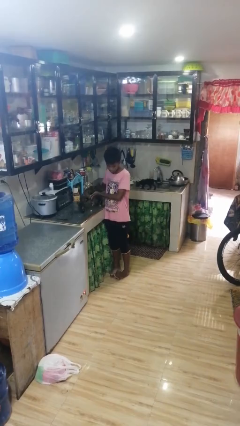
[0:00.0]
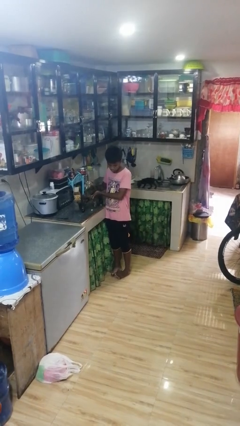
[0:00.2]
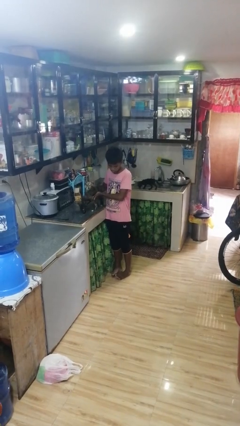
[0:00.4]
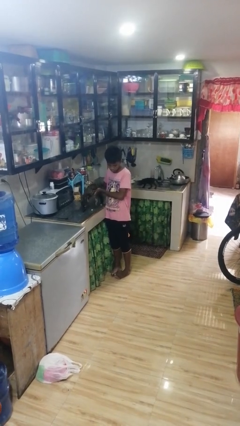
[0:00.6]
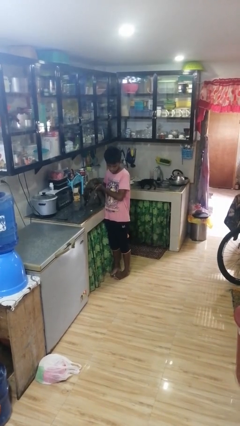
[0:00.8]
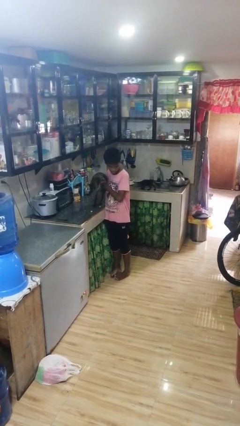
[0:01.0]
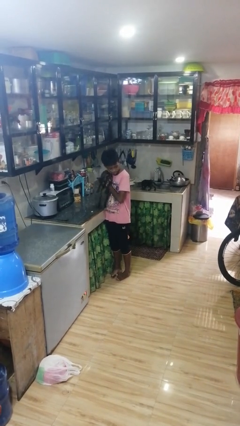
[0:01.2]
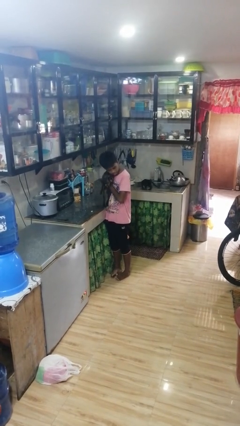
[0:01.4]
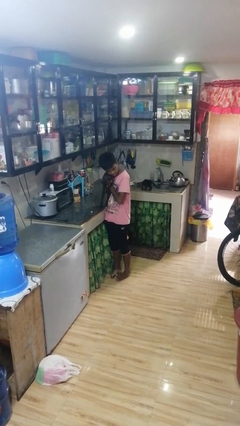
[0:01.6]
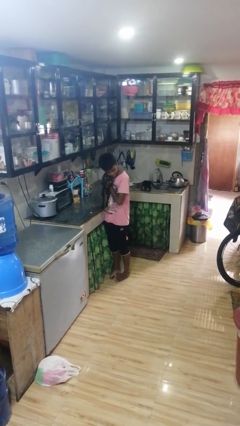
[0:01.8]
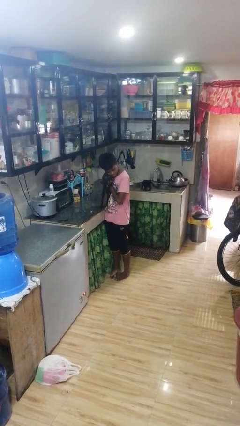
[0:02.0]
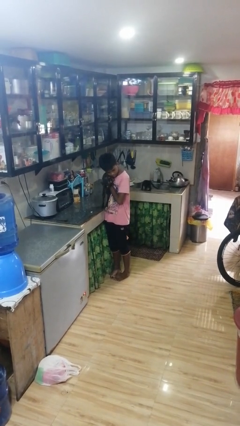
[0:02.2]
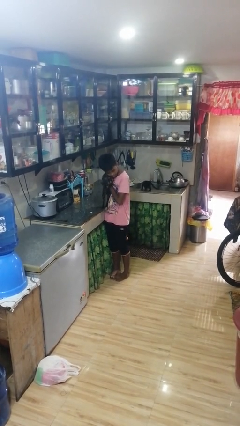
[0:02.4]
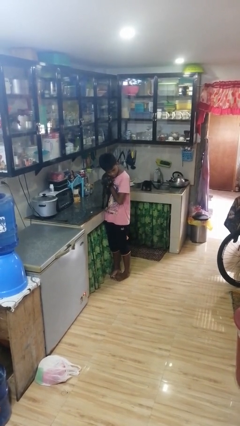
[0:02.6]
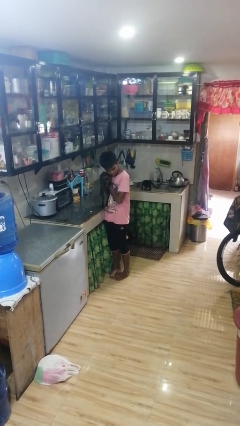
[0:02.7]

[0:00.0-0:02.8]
person hugs cat

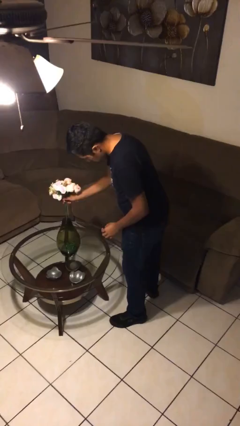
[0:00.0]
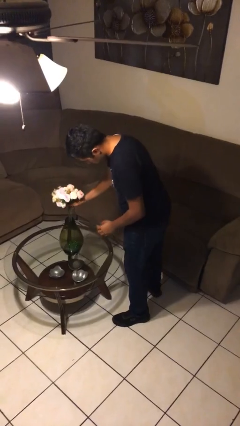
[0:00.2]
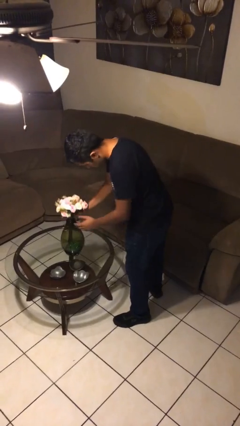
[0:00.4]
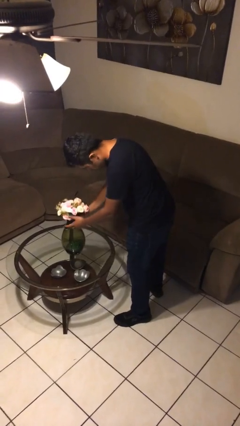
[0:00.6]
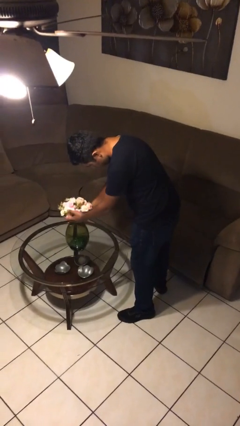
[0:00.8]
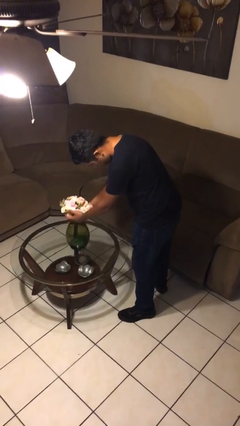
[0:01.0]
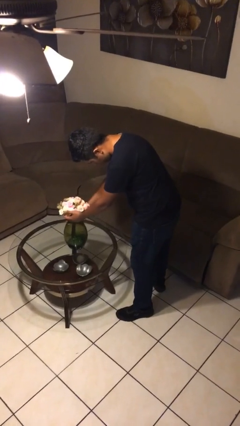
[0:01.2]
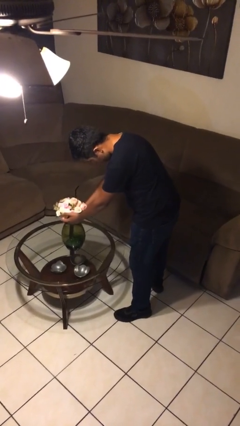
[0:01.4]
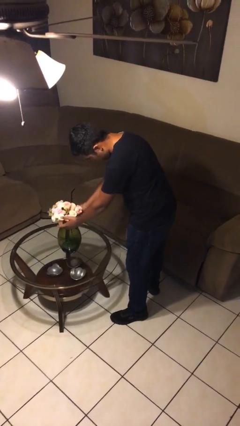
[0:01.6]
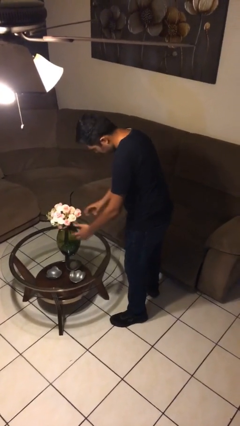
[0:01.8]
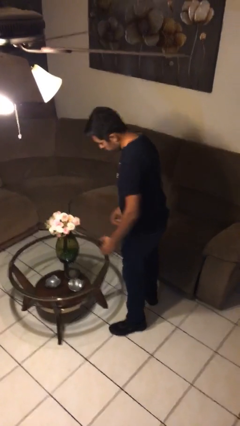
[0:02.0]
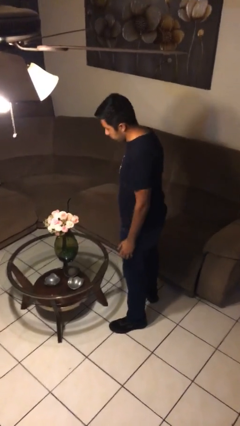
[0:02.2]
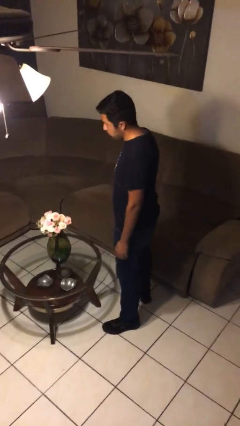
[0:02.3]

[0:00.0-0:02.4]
person arranges flowers in vase

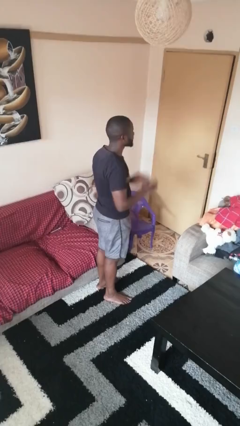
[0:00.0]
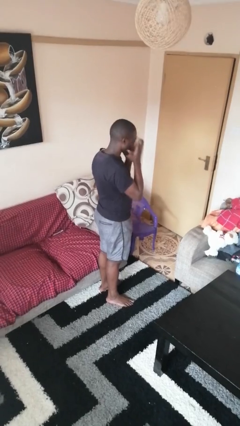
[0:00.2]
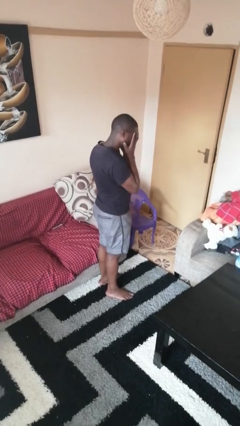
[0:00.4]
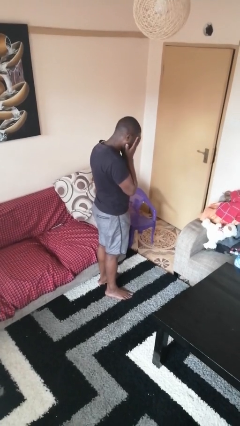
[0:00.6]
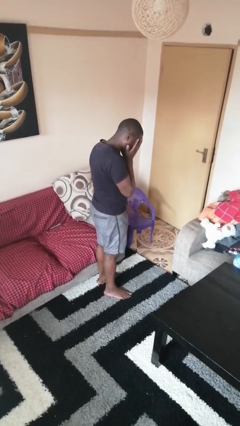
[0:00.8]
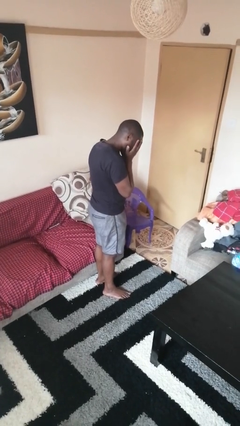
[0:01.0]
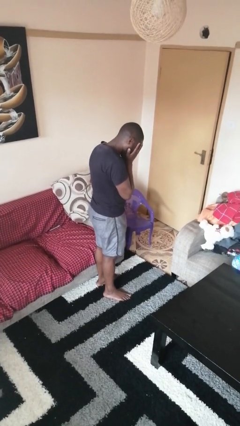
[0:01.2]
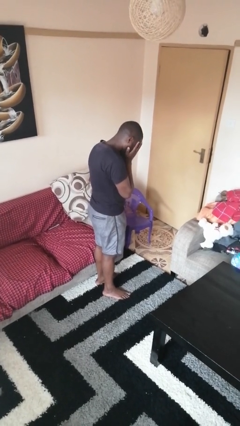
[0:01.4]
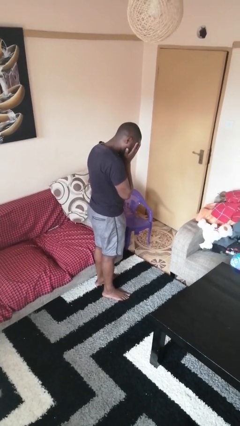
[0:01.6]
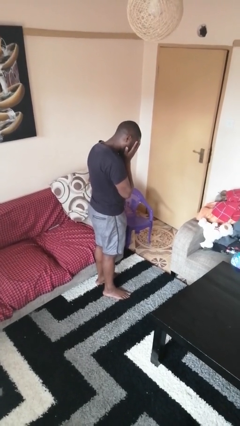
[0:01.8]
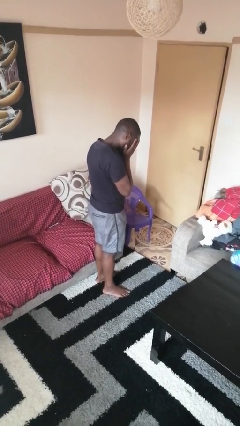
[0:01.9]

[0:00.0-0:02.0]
person covers face with hands

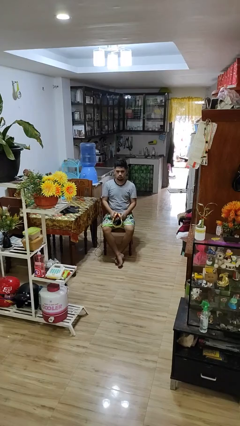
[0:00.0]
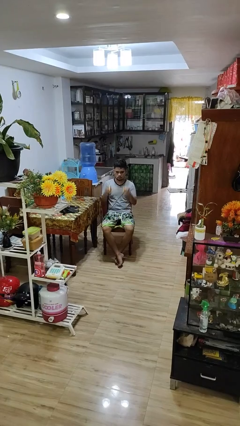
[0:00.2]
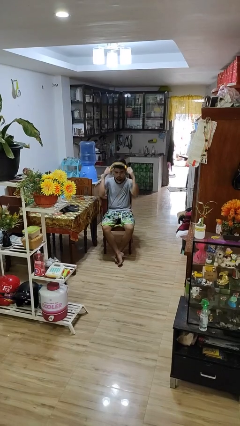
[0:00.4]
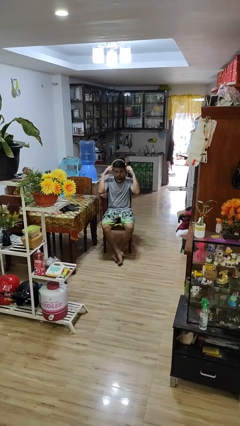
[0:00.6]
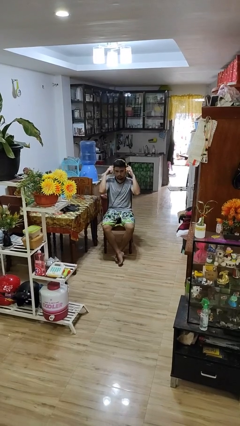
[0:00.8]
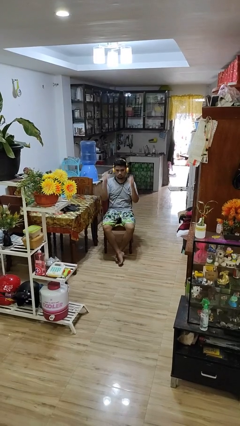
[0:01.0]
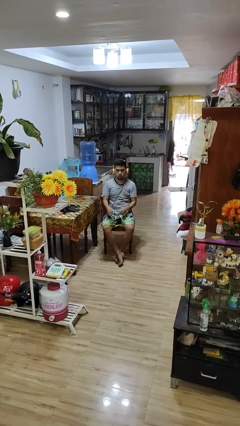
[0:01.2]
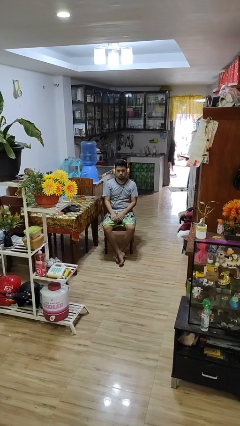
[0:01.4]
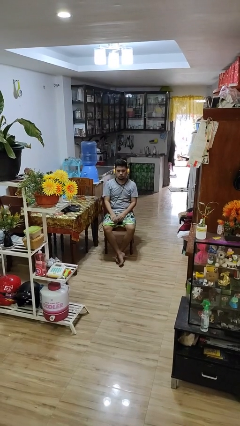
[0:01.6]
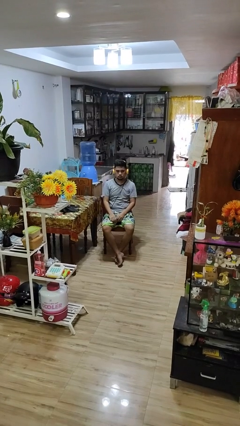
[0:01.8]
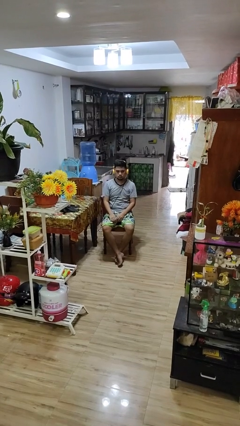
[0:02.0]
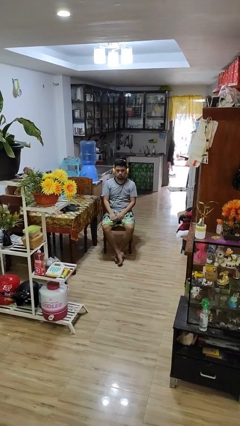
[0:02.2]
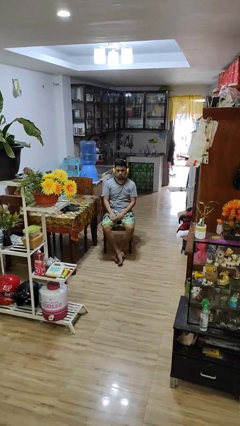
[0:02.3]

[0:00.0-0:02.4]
person puts on headphones

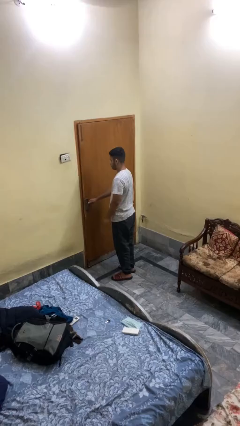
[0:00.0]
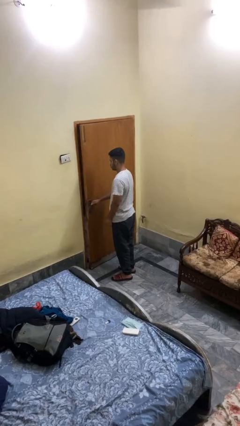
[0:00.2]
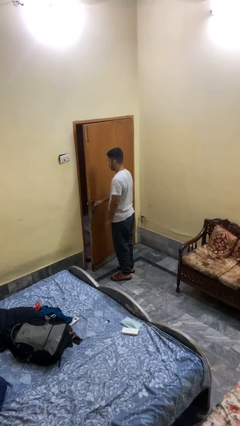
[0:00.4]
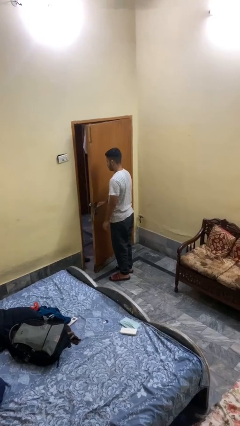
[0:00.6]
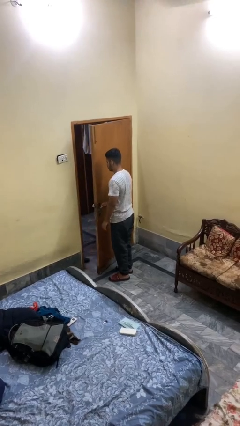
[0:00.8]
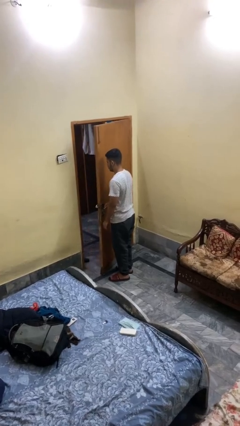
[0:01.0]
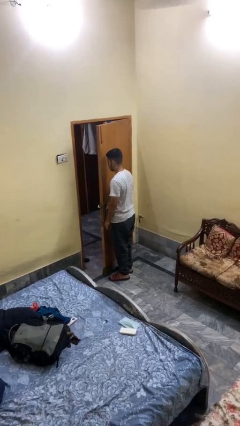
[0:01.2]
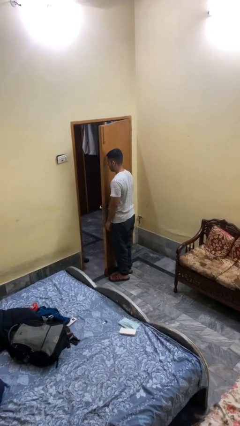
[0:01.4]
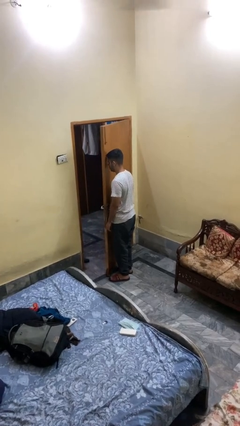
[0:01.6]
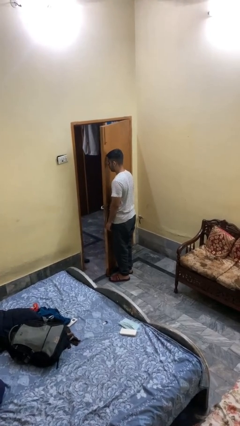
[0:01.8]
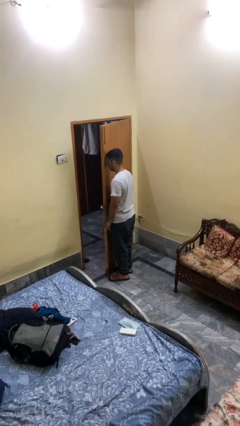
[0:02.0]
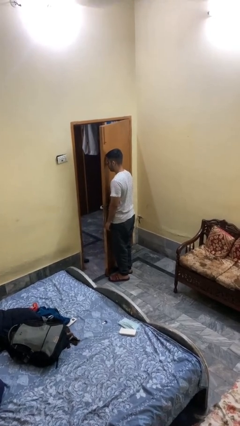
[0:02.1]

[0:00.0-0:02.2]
person opens facility door

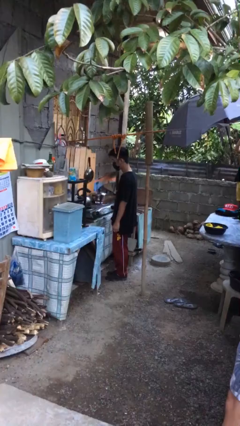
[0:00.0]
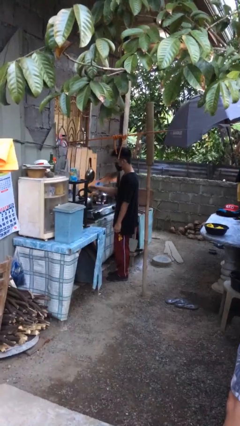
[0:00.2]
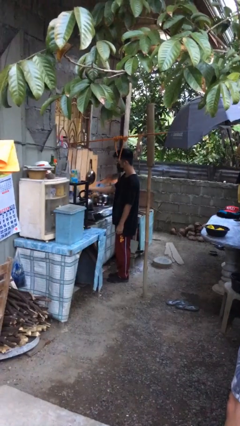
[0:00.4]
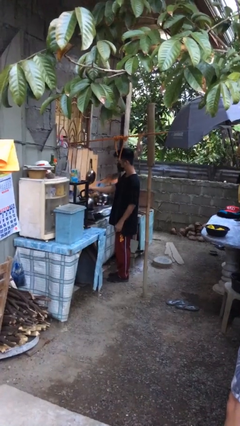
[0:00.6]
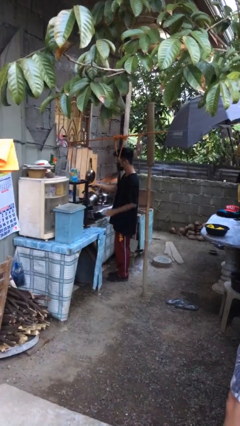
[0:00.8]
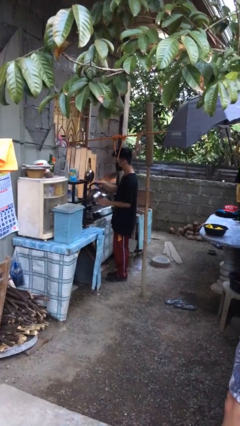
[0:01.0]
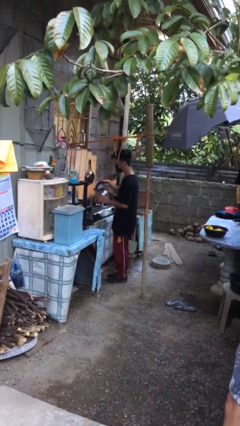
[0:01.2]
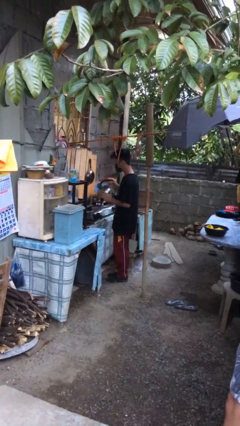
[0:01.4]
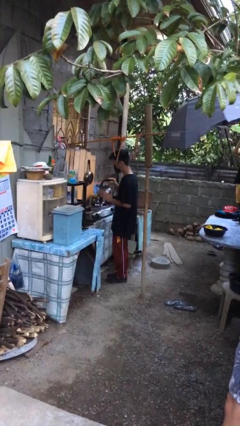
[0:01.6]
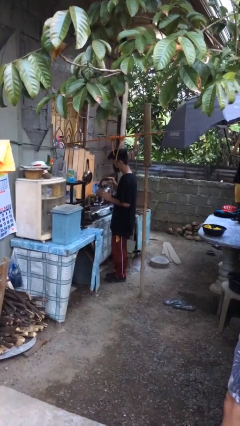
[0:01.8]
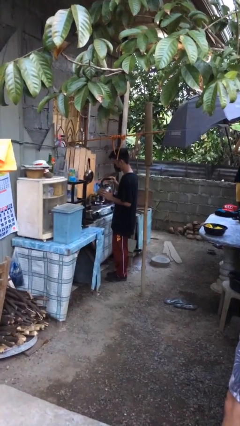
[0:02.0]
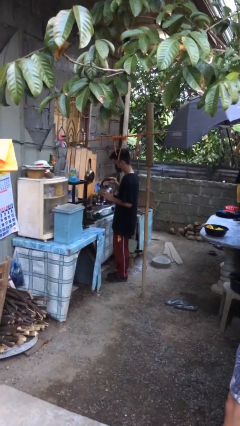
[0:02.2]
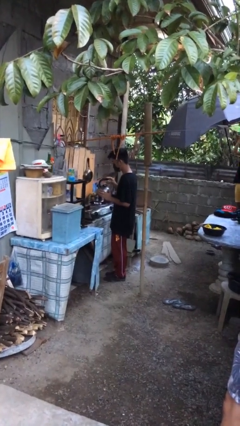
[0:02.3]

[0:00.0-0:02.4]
person picks up object from countertop

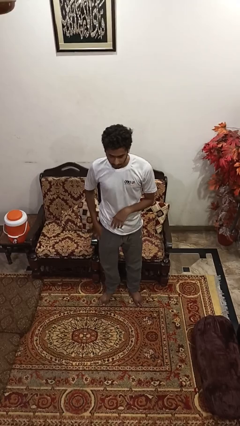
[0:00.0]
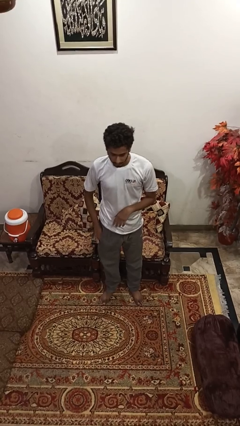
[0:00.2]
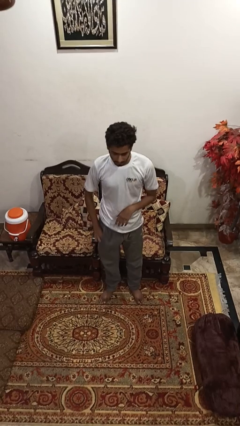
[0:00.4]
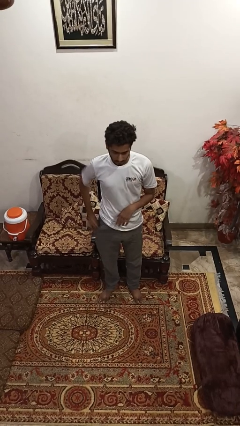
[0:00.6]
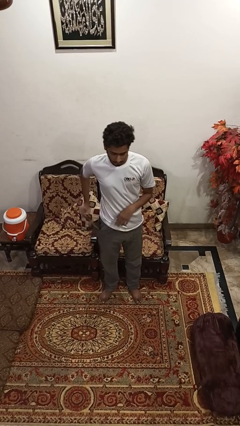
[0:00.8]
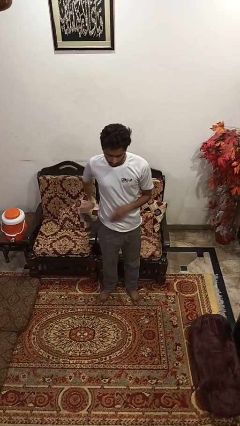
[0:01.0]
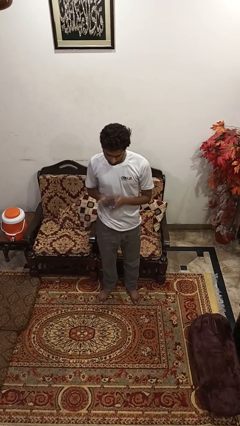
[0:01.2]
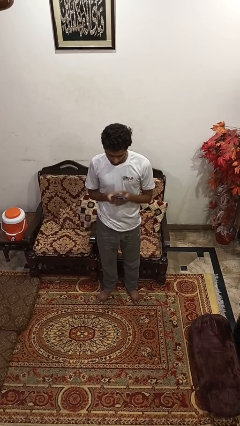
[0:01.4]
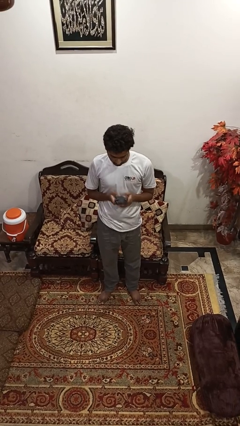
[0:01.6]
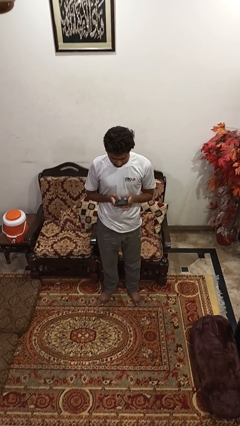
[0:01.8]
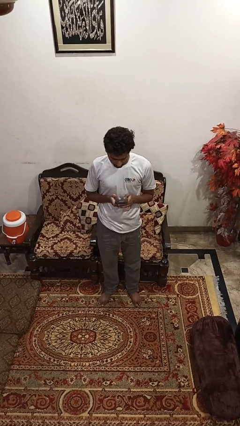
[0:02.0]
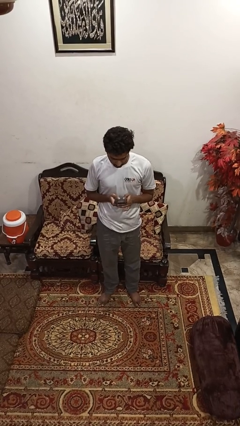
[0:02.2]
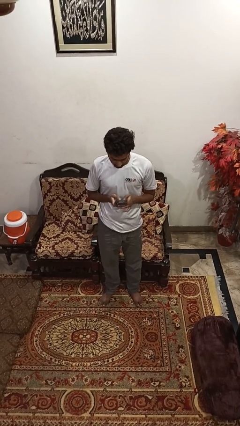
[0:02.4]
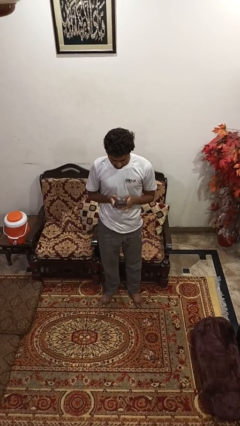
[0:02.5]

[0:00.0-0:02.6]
person takes phone from pocket

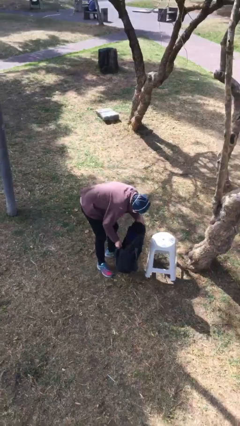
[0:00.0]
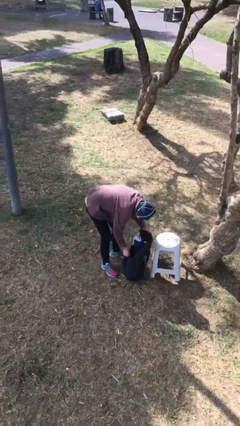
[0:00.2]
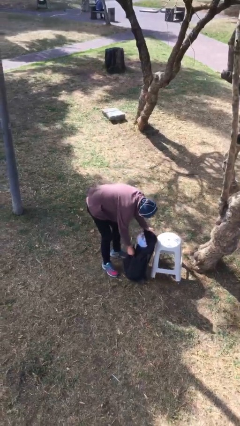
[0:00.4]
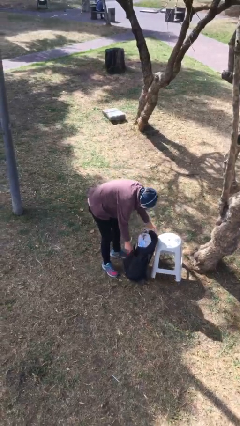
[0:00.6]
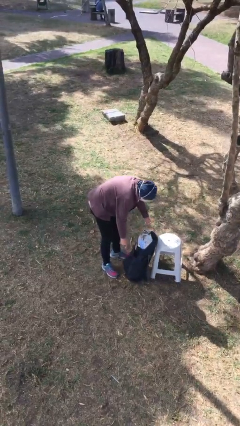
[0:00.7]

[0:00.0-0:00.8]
person puts down object on floor
